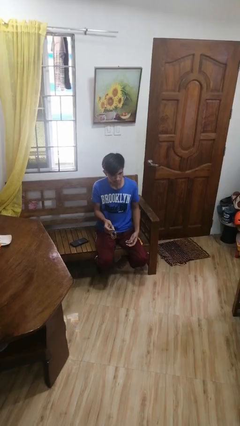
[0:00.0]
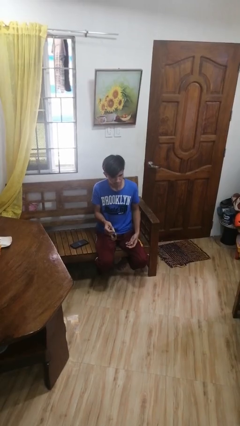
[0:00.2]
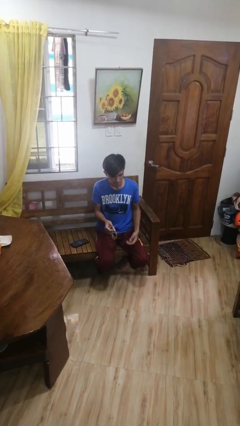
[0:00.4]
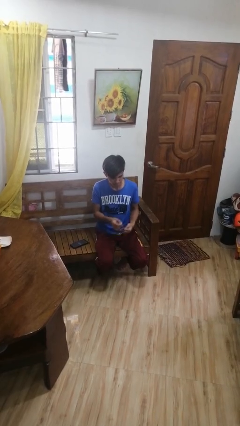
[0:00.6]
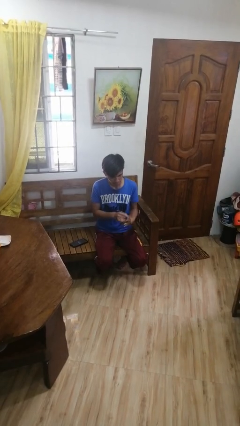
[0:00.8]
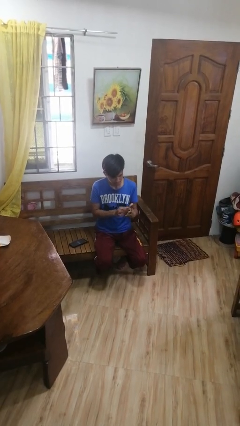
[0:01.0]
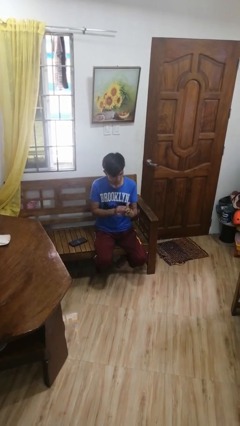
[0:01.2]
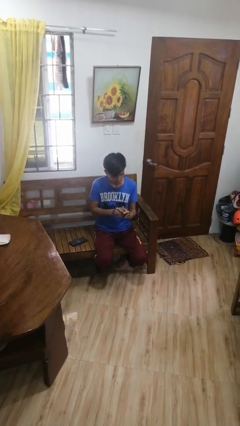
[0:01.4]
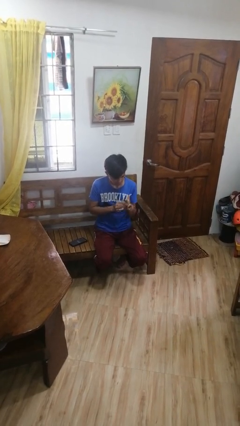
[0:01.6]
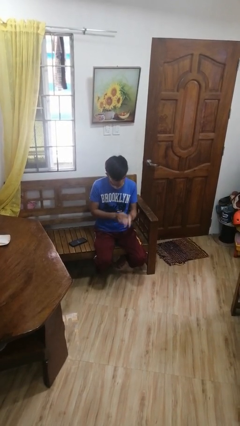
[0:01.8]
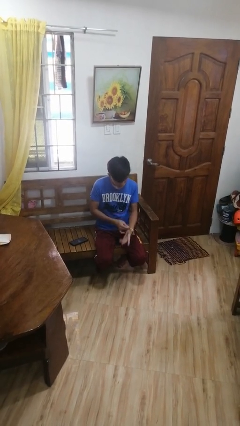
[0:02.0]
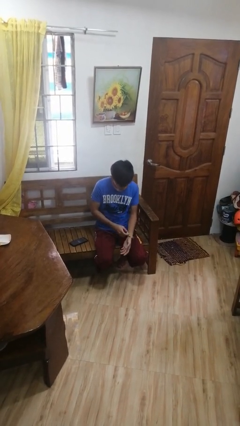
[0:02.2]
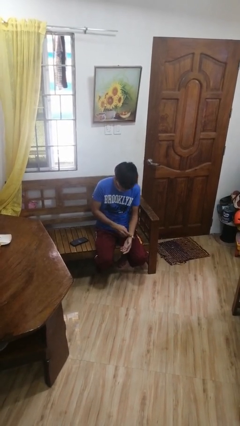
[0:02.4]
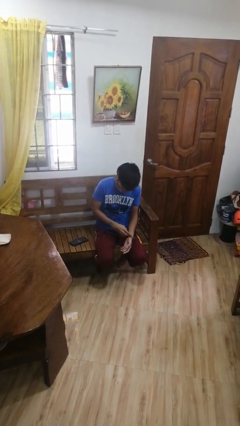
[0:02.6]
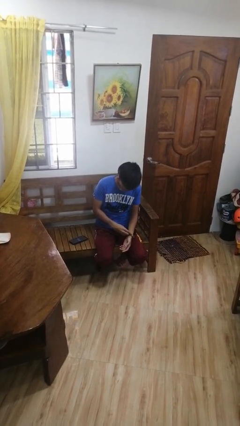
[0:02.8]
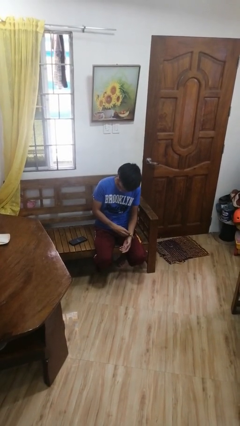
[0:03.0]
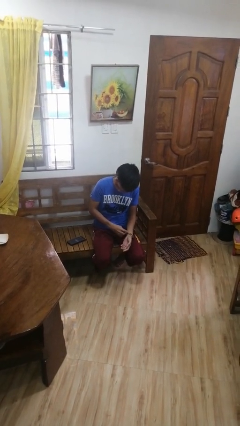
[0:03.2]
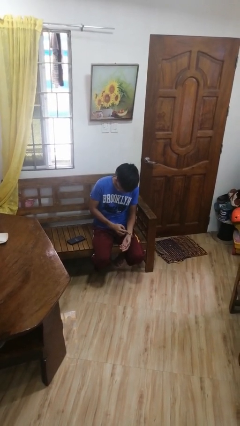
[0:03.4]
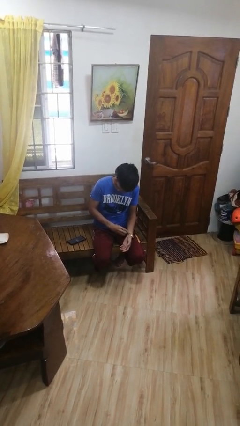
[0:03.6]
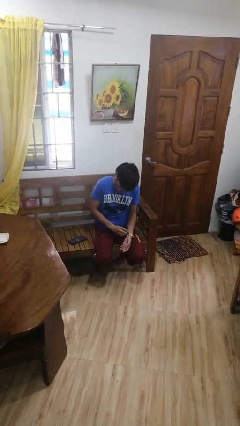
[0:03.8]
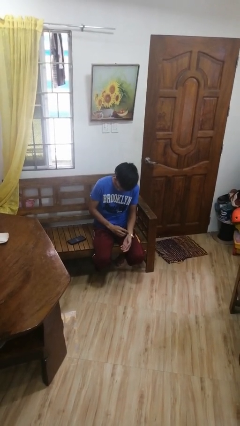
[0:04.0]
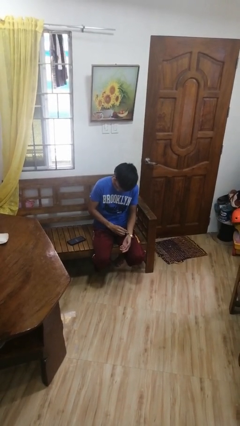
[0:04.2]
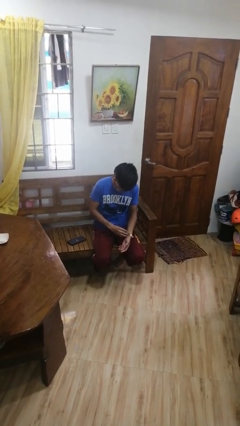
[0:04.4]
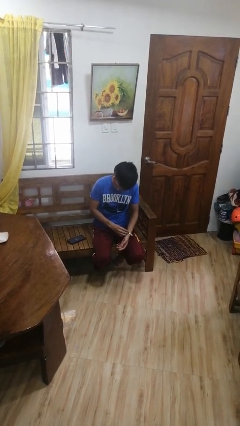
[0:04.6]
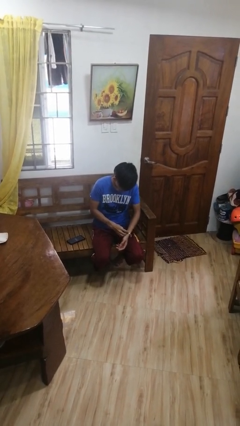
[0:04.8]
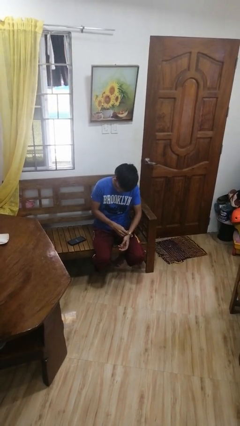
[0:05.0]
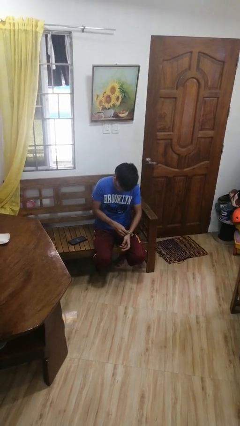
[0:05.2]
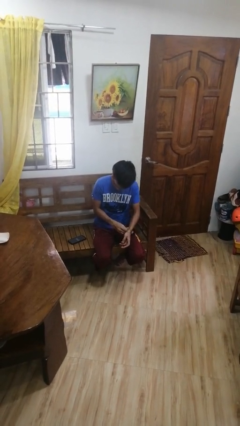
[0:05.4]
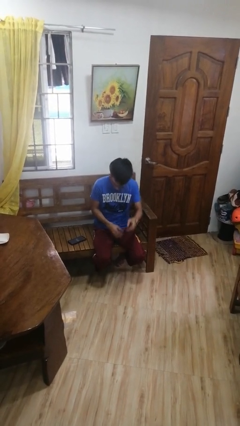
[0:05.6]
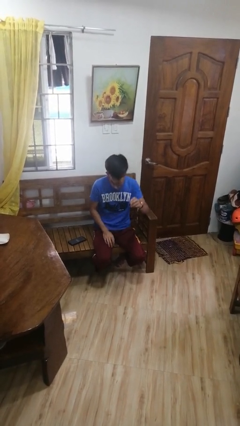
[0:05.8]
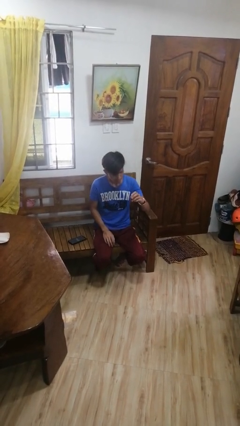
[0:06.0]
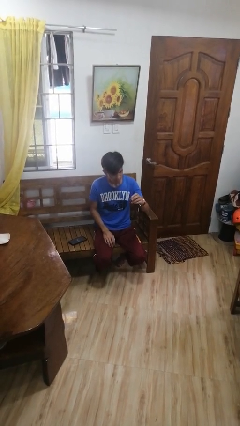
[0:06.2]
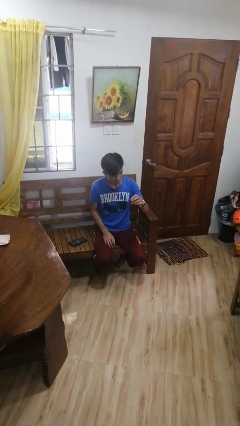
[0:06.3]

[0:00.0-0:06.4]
person puts on wristwatch

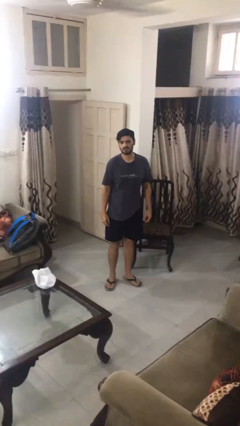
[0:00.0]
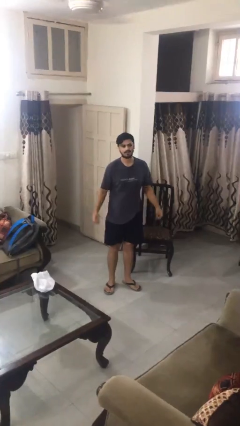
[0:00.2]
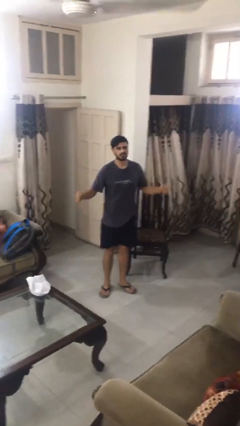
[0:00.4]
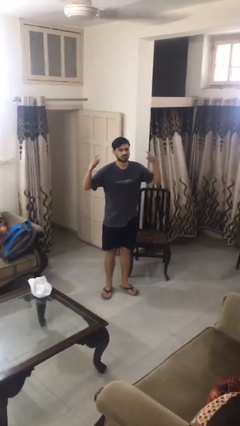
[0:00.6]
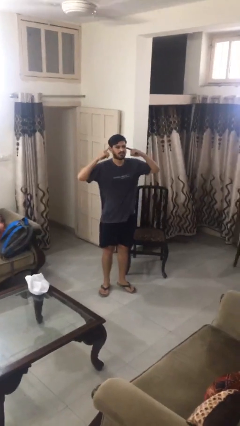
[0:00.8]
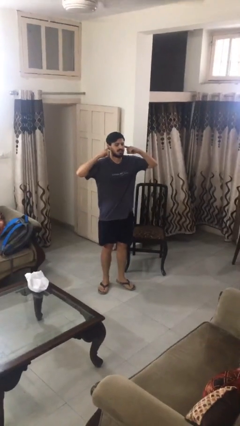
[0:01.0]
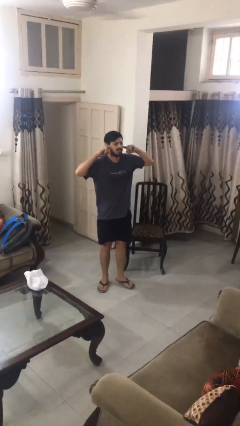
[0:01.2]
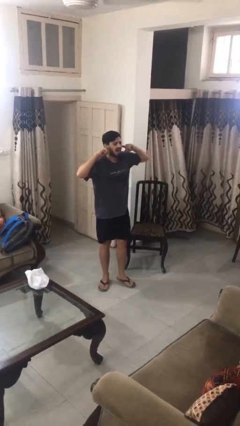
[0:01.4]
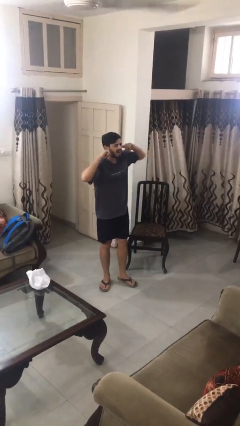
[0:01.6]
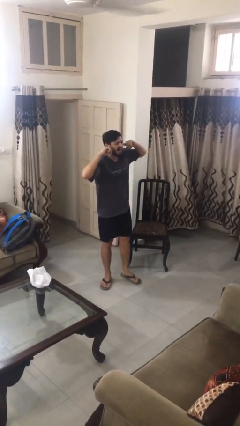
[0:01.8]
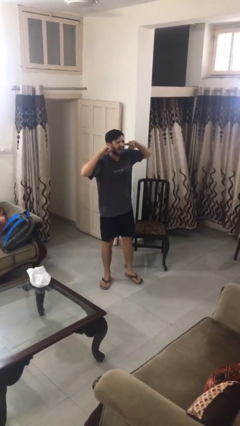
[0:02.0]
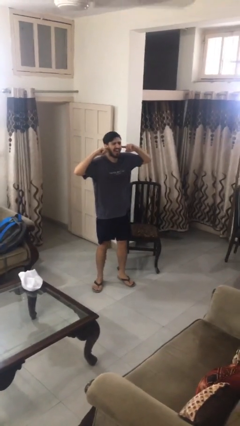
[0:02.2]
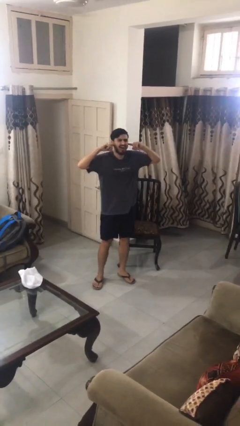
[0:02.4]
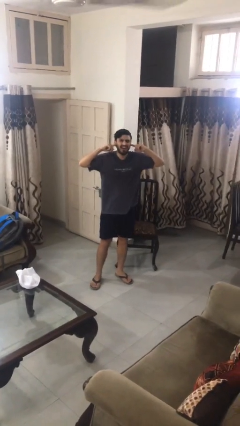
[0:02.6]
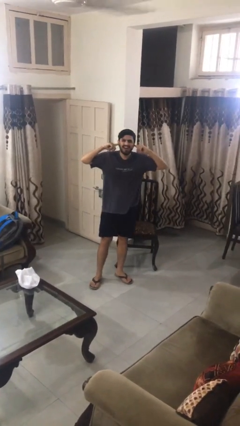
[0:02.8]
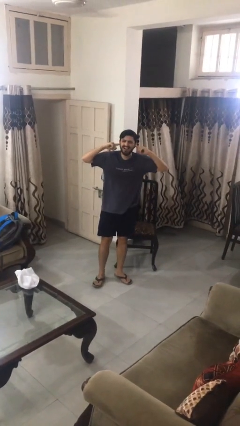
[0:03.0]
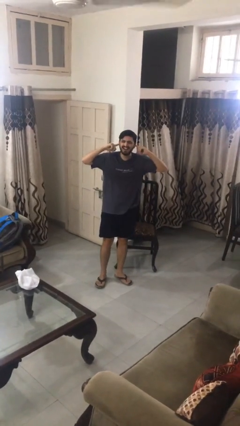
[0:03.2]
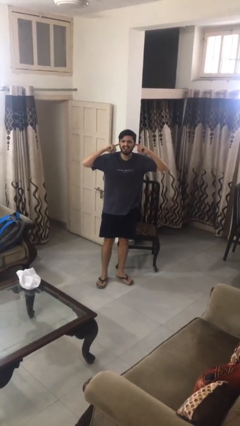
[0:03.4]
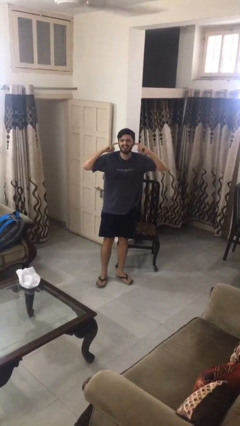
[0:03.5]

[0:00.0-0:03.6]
person puts fingers in ear

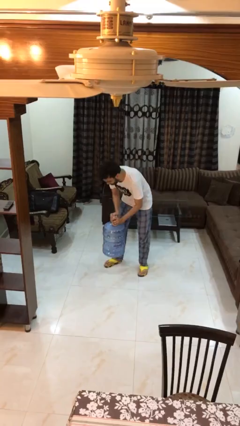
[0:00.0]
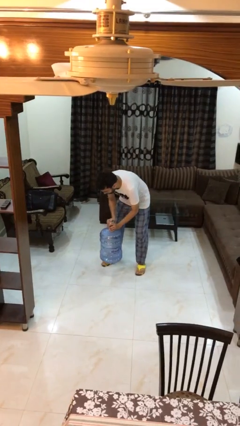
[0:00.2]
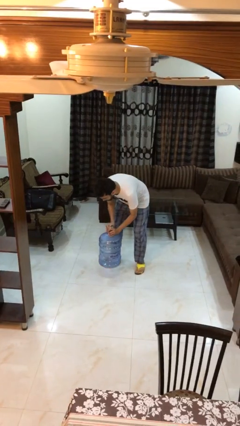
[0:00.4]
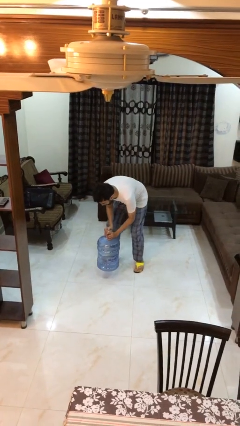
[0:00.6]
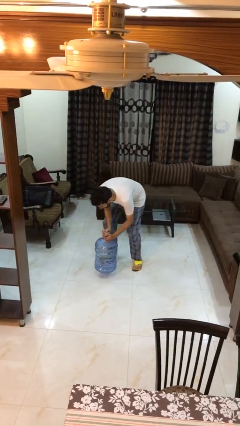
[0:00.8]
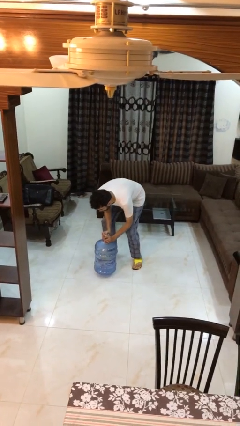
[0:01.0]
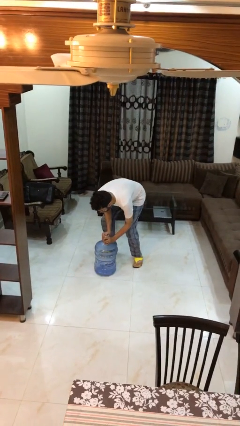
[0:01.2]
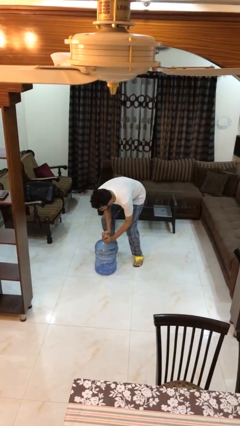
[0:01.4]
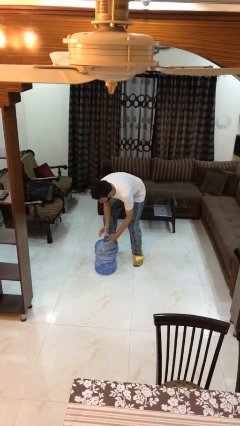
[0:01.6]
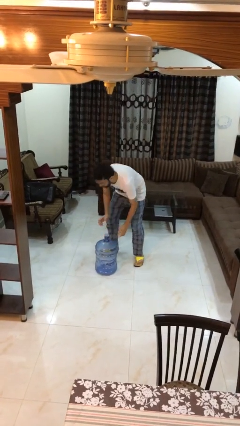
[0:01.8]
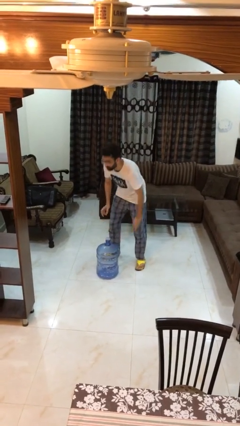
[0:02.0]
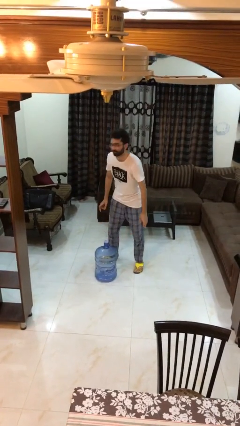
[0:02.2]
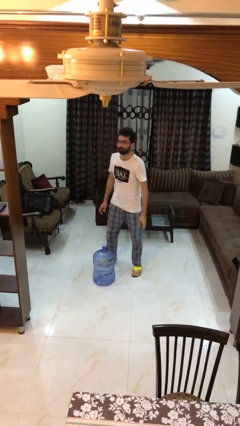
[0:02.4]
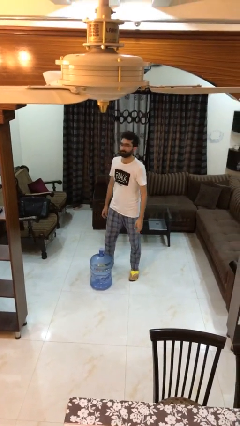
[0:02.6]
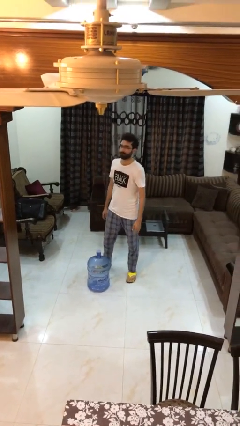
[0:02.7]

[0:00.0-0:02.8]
person puts down object on floor

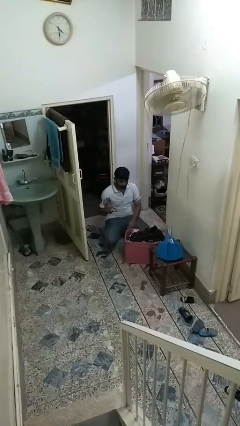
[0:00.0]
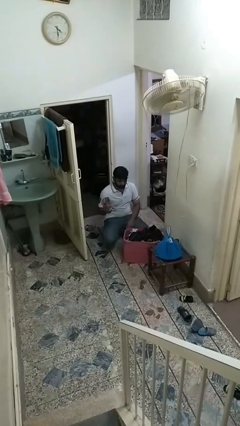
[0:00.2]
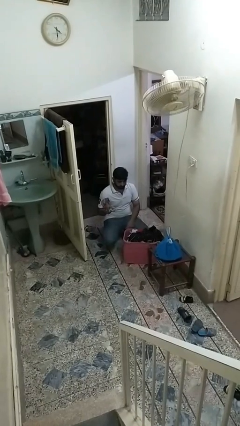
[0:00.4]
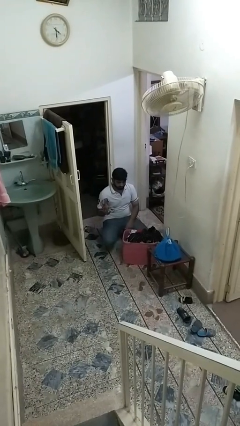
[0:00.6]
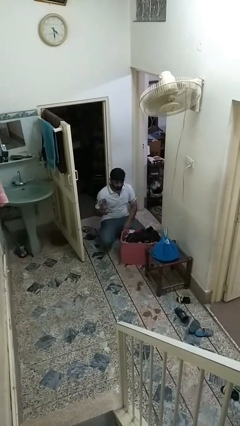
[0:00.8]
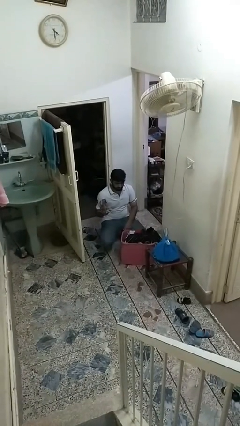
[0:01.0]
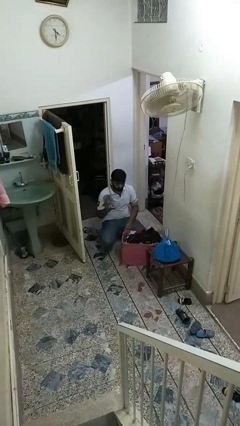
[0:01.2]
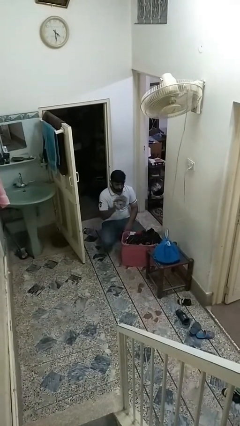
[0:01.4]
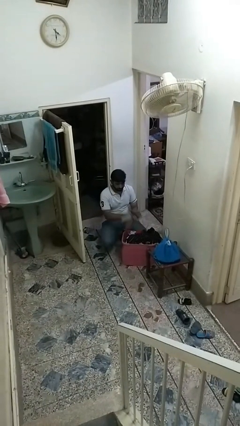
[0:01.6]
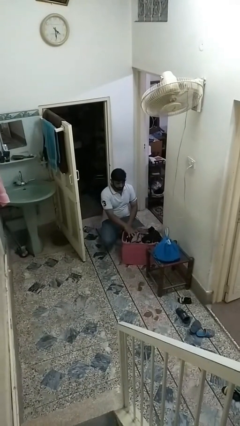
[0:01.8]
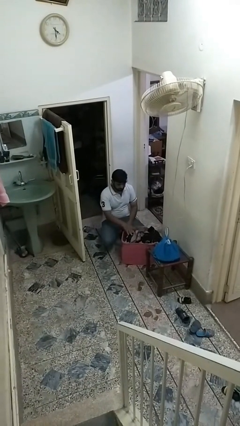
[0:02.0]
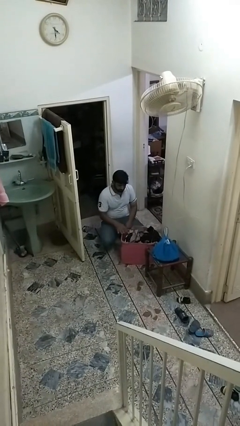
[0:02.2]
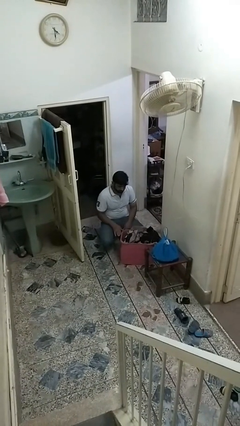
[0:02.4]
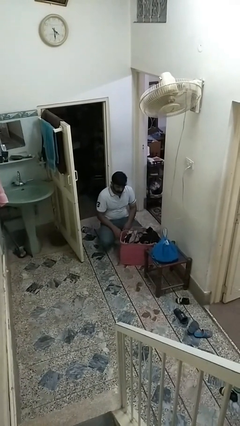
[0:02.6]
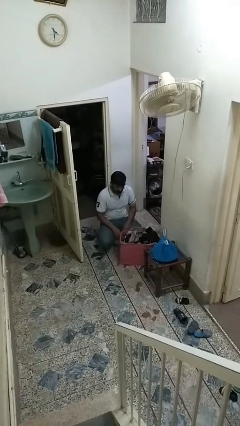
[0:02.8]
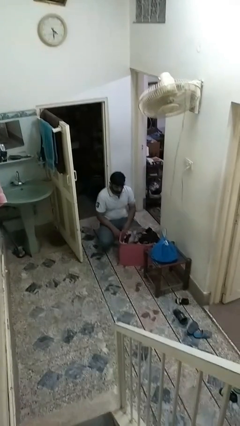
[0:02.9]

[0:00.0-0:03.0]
person puts object into basket

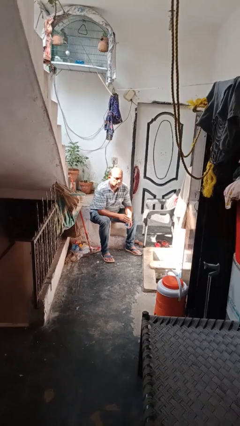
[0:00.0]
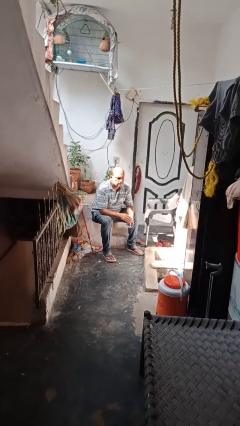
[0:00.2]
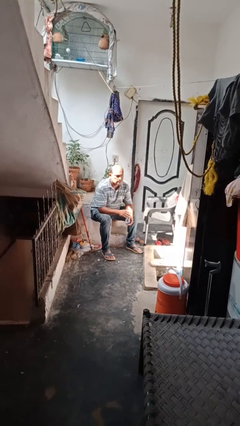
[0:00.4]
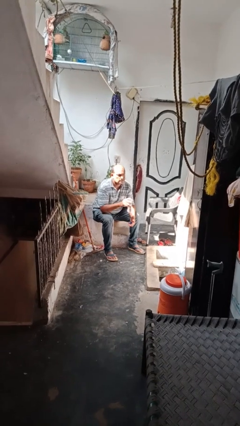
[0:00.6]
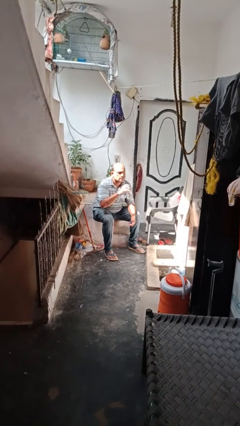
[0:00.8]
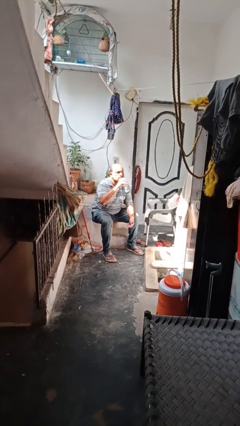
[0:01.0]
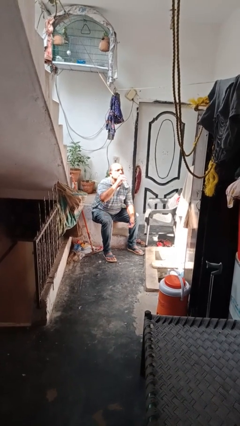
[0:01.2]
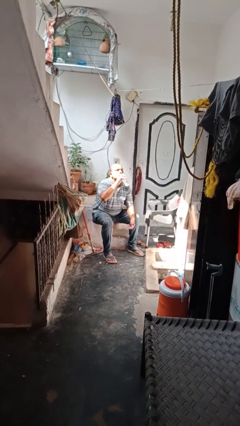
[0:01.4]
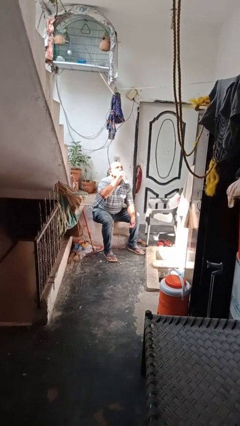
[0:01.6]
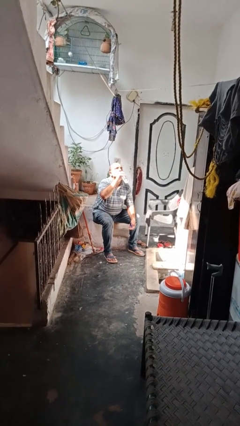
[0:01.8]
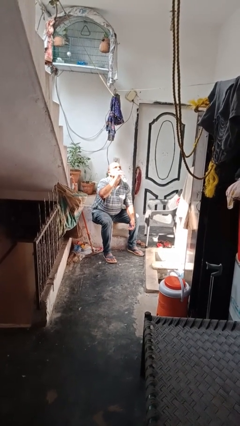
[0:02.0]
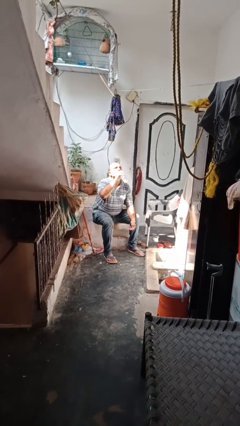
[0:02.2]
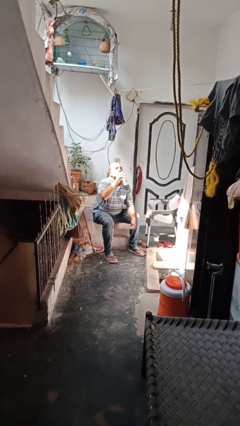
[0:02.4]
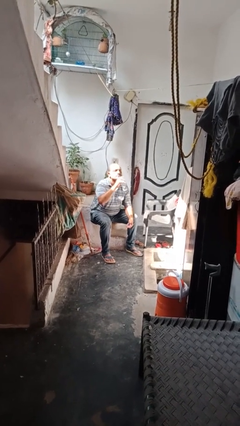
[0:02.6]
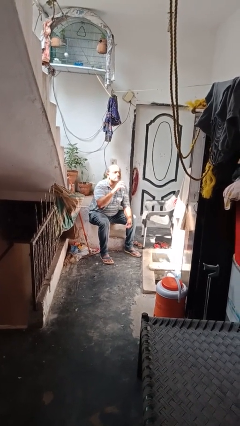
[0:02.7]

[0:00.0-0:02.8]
person drinks from bottle
